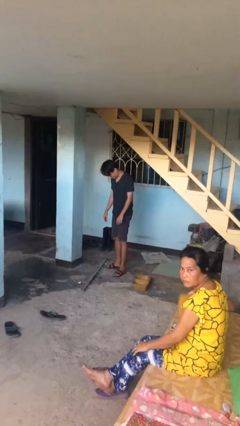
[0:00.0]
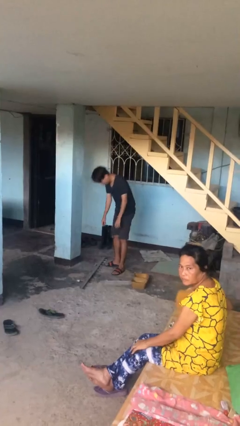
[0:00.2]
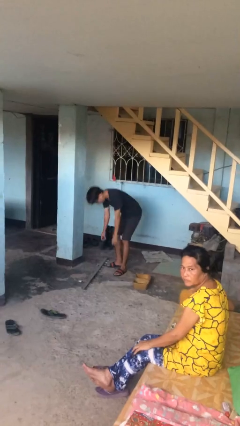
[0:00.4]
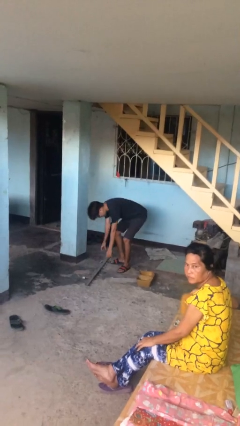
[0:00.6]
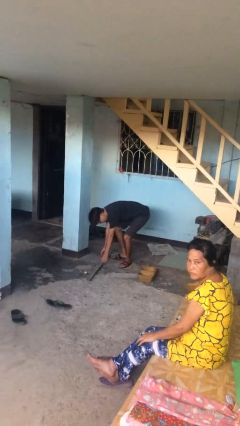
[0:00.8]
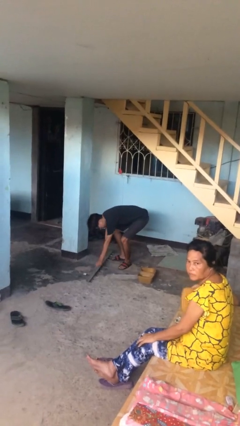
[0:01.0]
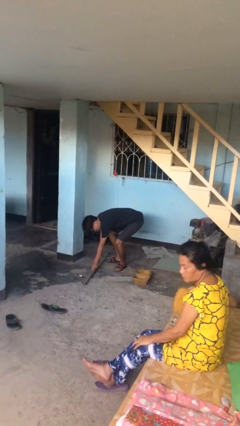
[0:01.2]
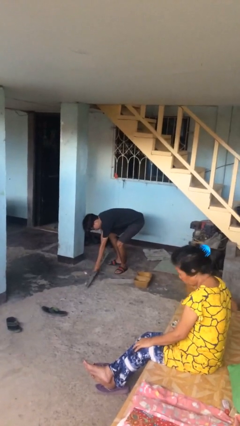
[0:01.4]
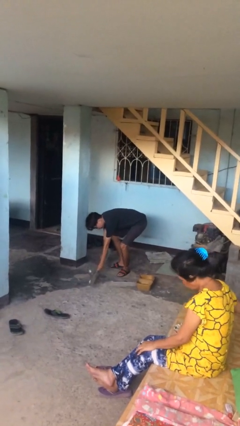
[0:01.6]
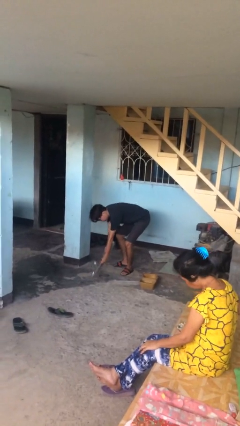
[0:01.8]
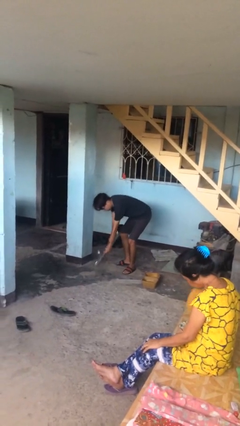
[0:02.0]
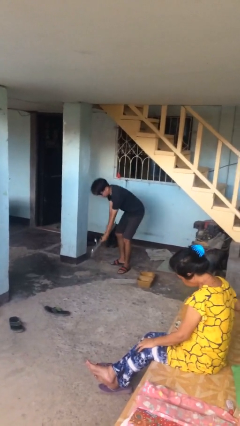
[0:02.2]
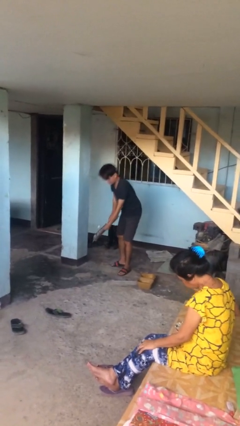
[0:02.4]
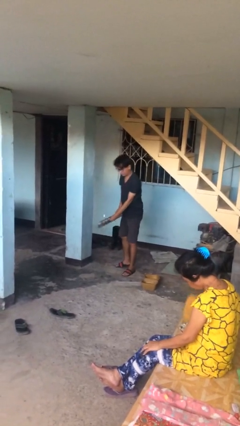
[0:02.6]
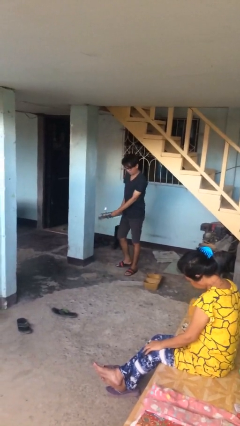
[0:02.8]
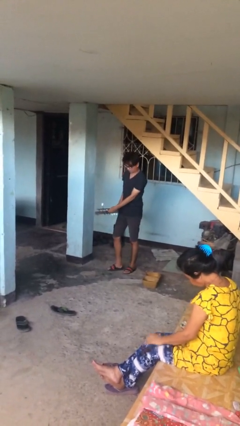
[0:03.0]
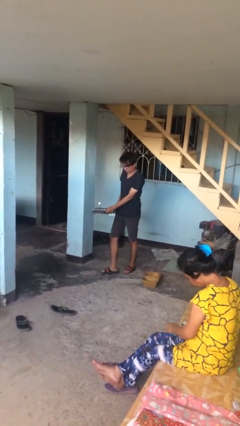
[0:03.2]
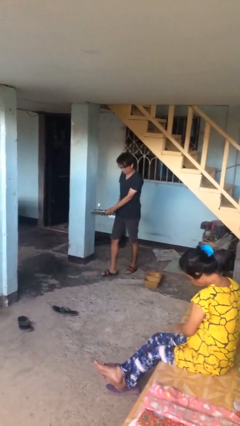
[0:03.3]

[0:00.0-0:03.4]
person picks up object from floor

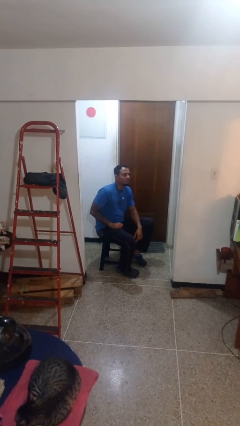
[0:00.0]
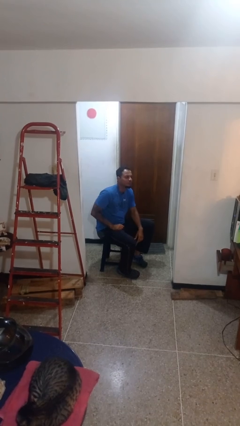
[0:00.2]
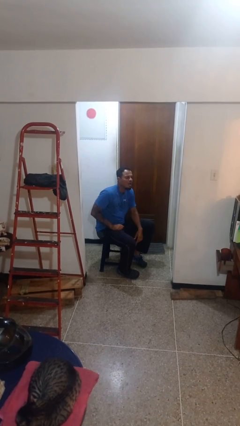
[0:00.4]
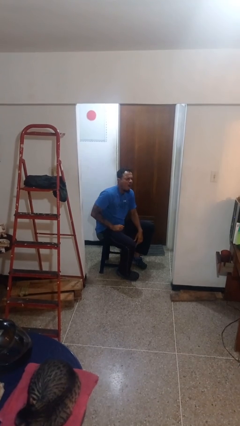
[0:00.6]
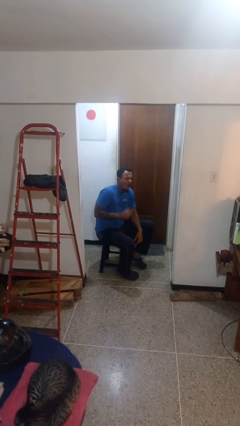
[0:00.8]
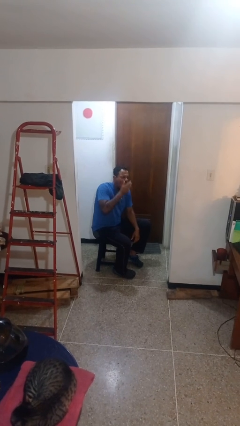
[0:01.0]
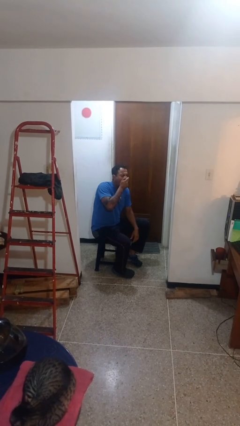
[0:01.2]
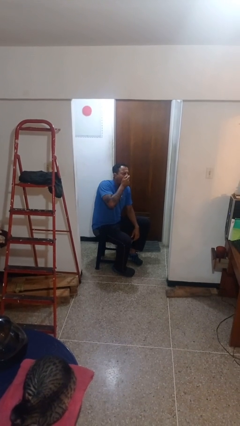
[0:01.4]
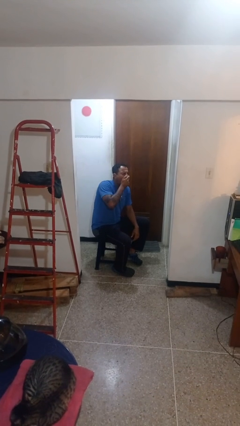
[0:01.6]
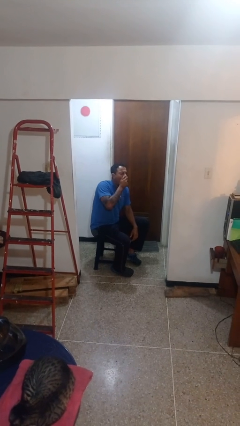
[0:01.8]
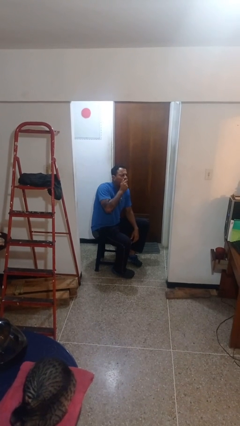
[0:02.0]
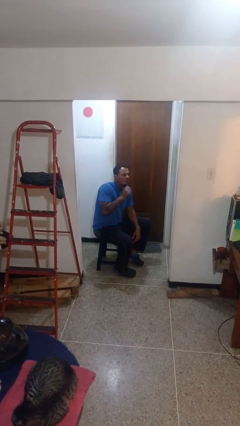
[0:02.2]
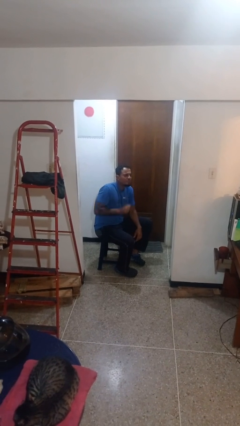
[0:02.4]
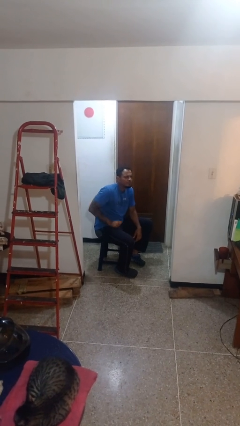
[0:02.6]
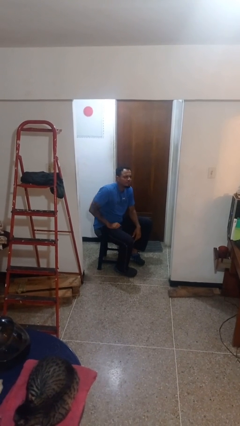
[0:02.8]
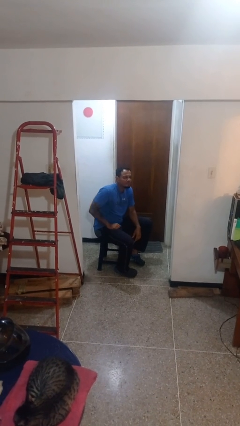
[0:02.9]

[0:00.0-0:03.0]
person yawns

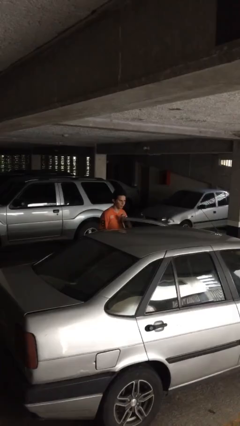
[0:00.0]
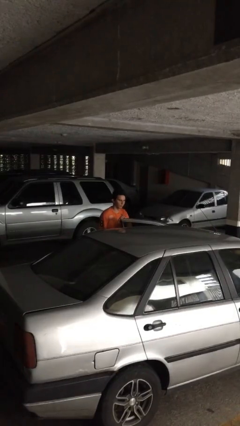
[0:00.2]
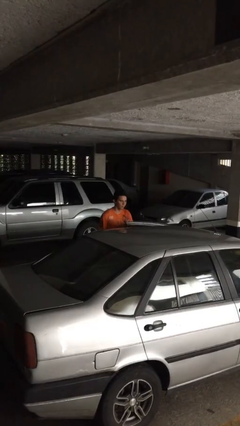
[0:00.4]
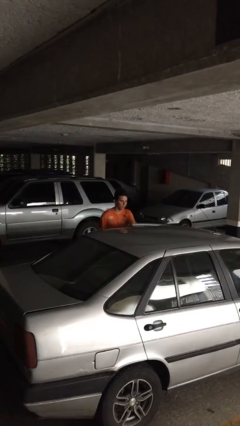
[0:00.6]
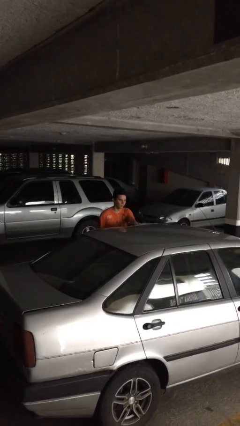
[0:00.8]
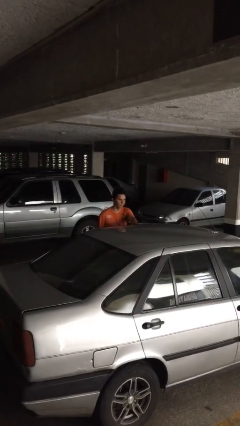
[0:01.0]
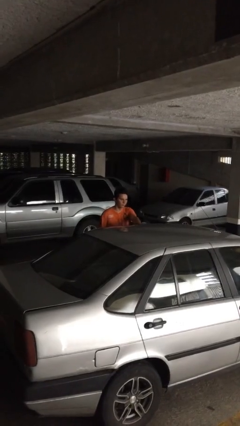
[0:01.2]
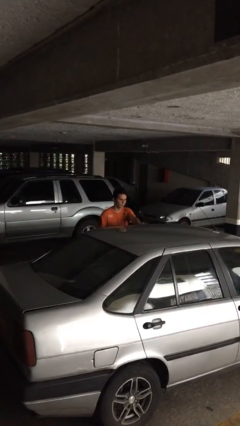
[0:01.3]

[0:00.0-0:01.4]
person closes car door

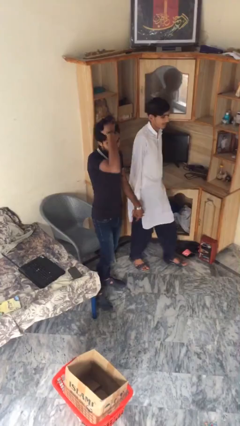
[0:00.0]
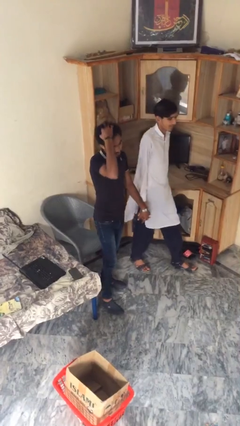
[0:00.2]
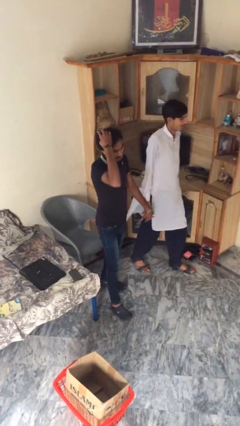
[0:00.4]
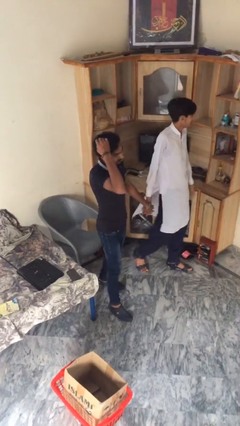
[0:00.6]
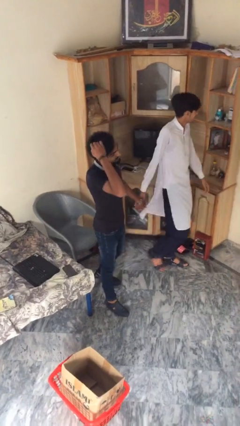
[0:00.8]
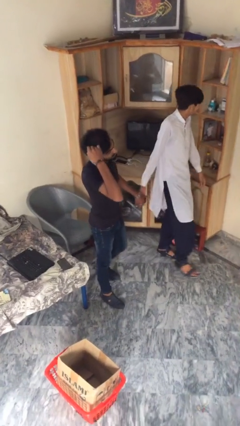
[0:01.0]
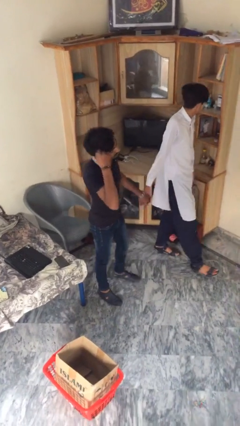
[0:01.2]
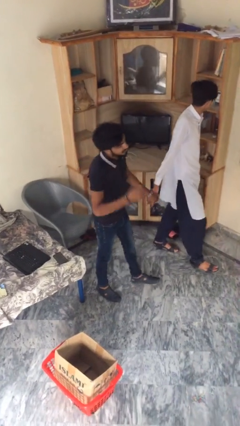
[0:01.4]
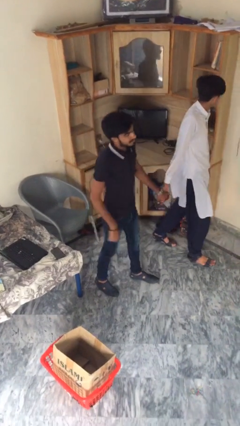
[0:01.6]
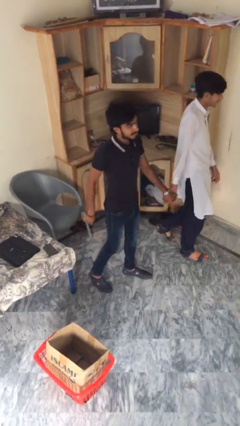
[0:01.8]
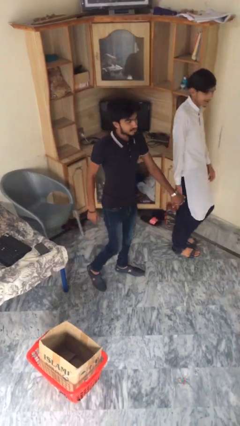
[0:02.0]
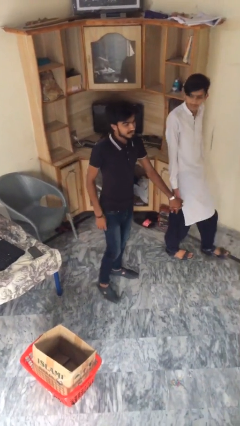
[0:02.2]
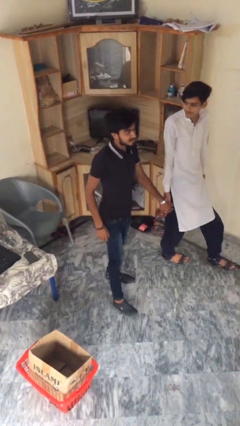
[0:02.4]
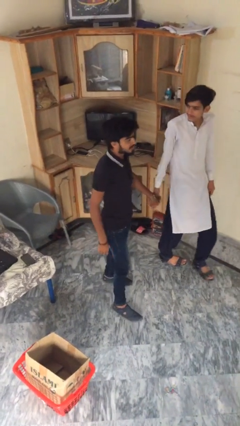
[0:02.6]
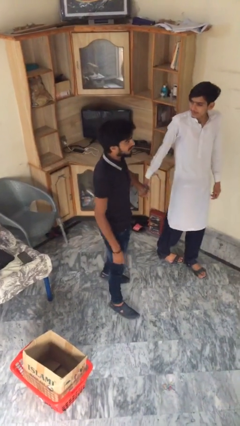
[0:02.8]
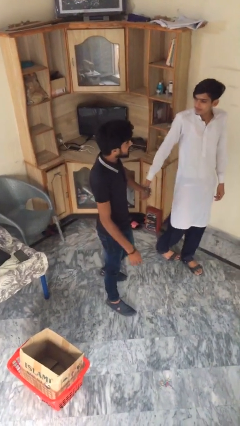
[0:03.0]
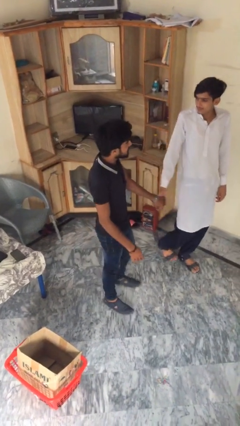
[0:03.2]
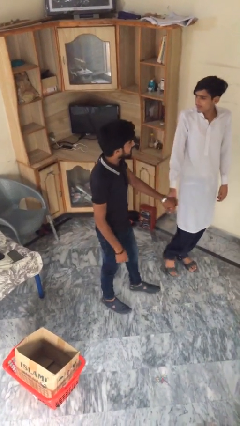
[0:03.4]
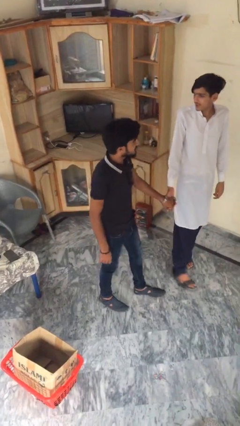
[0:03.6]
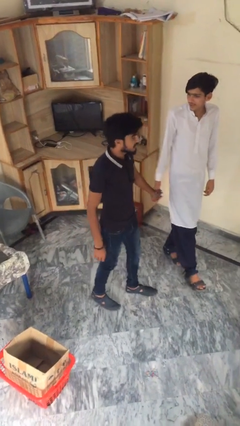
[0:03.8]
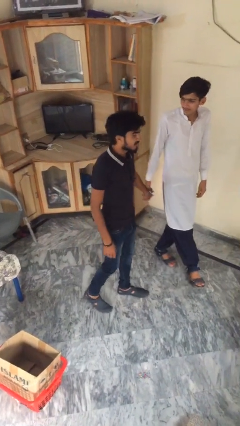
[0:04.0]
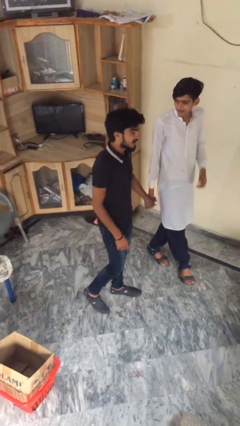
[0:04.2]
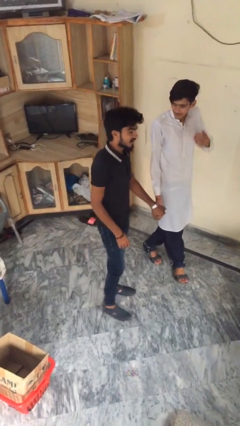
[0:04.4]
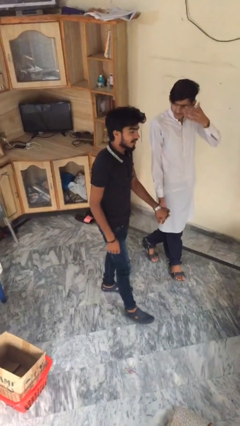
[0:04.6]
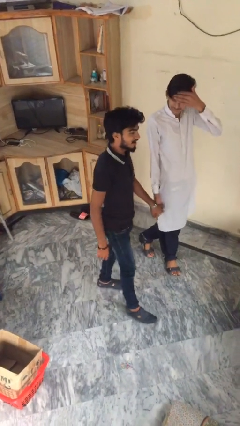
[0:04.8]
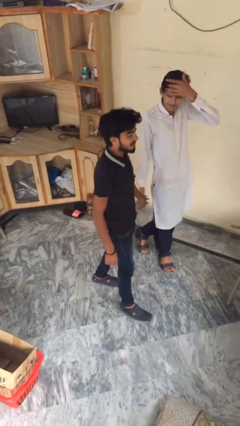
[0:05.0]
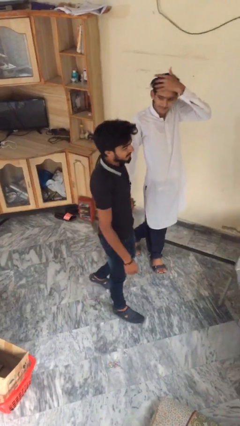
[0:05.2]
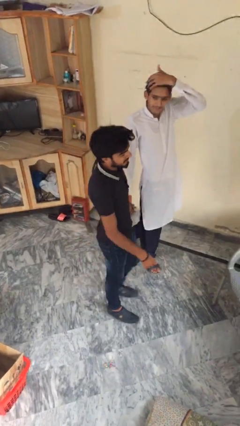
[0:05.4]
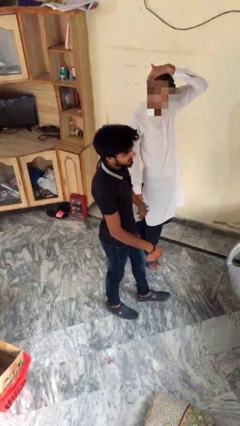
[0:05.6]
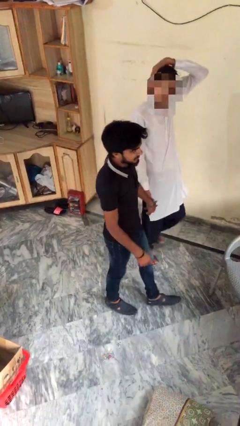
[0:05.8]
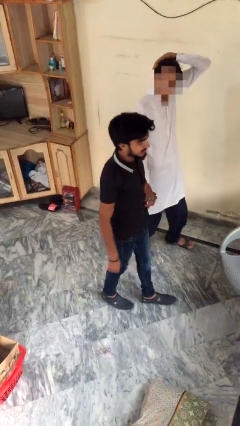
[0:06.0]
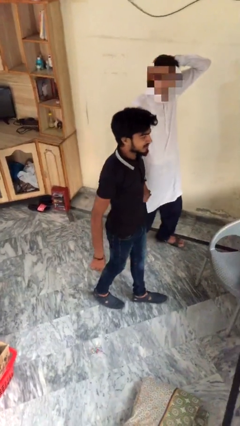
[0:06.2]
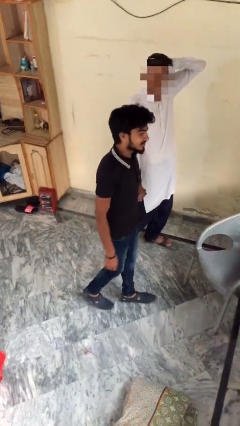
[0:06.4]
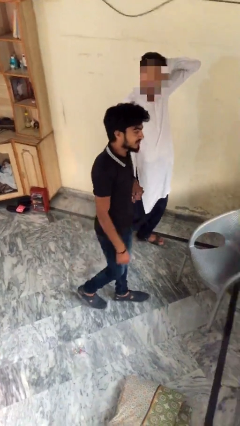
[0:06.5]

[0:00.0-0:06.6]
person holds hand

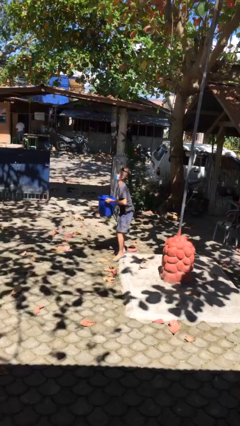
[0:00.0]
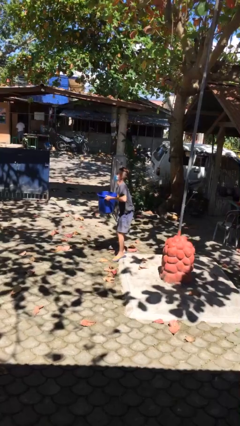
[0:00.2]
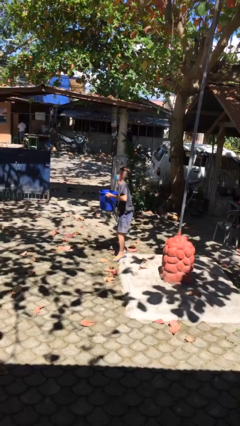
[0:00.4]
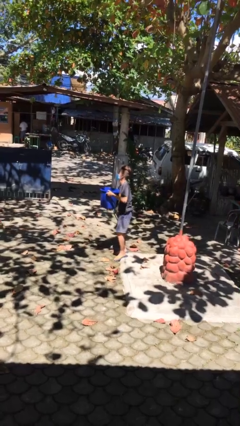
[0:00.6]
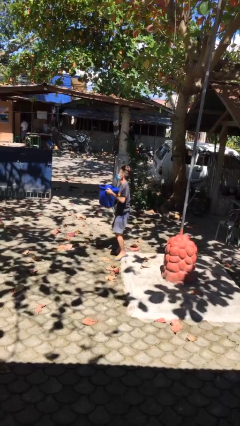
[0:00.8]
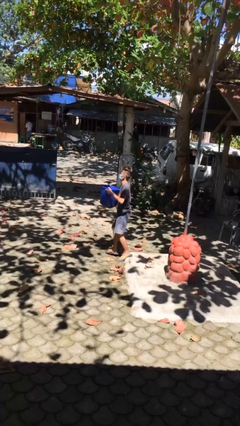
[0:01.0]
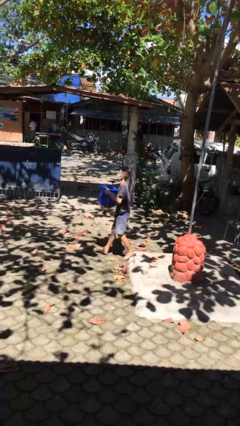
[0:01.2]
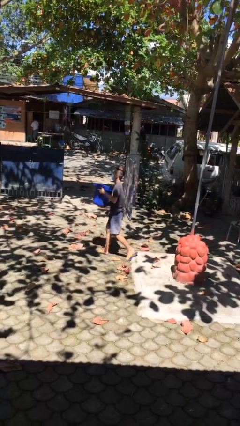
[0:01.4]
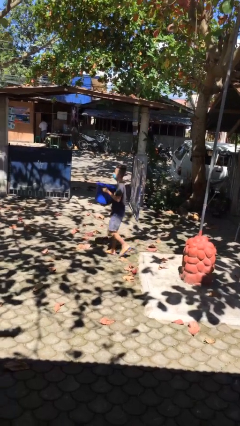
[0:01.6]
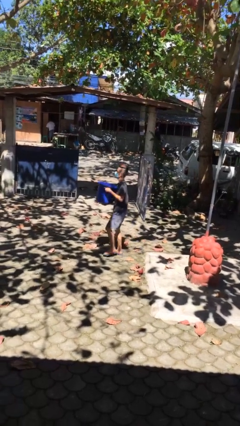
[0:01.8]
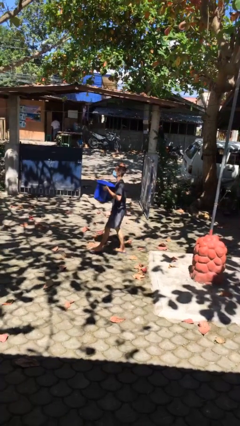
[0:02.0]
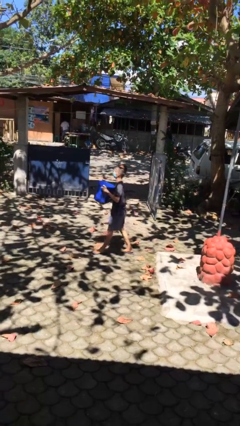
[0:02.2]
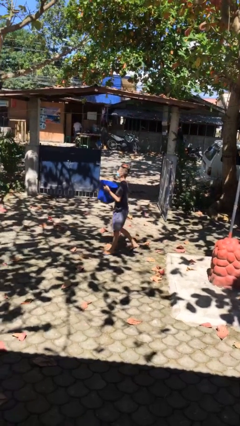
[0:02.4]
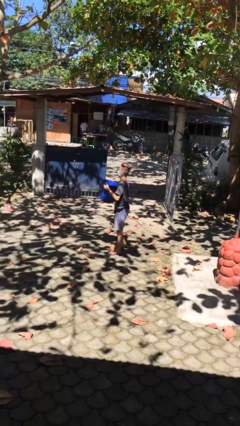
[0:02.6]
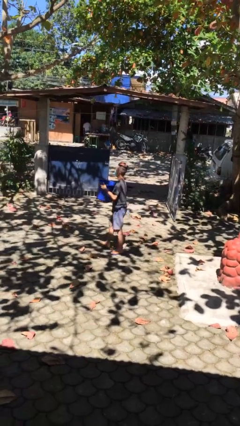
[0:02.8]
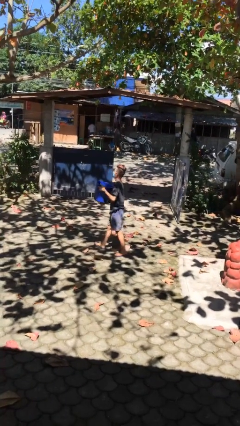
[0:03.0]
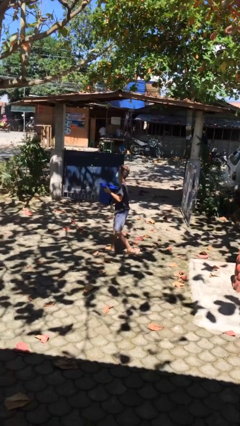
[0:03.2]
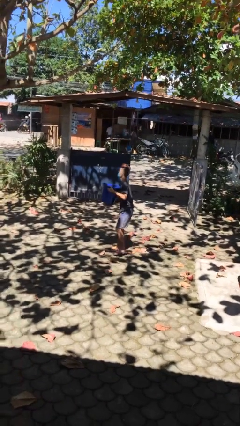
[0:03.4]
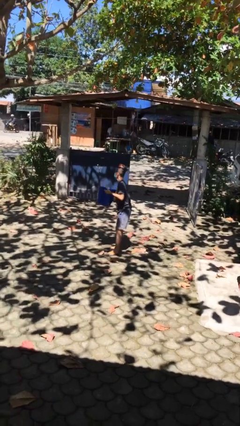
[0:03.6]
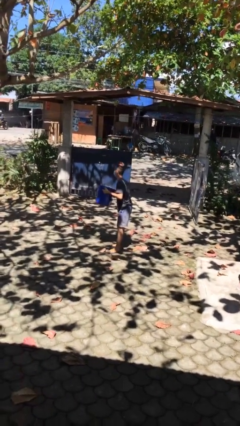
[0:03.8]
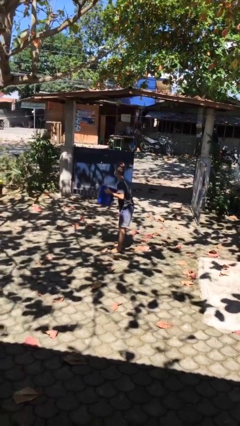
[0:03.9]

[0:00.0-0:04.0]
person carries heavy object
